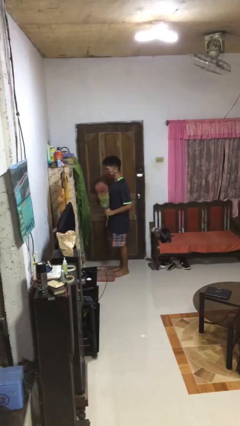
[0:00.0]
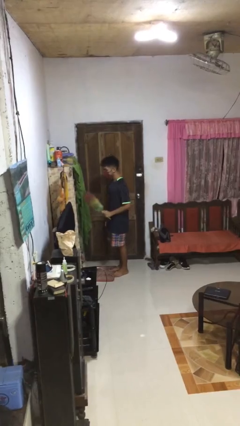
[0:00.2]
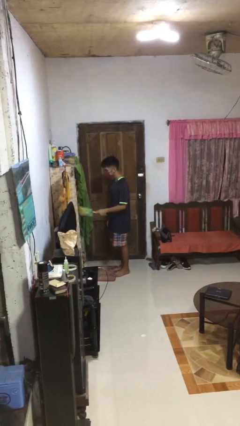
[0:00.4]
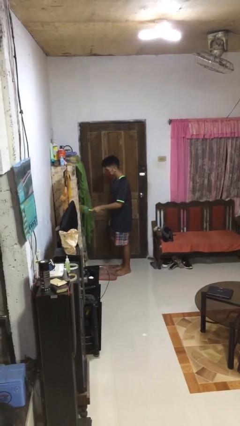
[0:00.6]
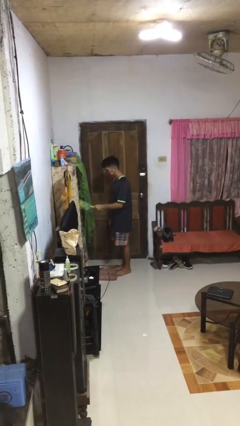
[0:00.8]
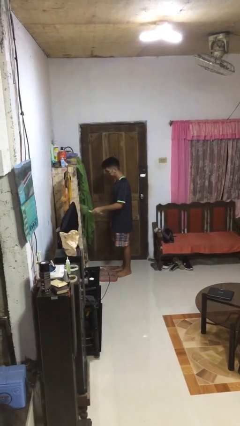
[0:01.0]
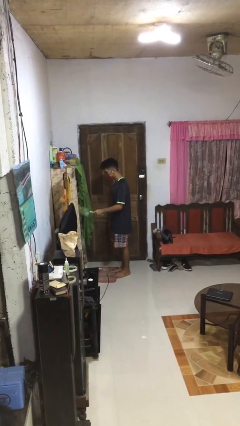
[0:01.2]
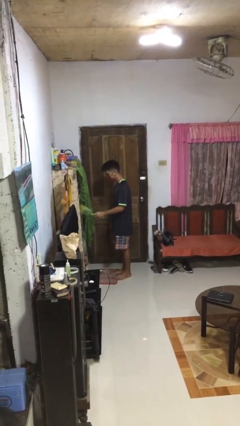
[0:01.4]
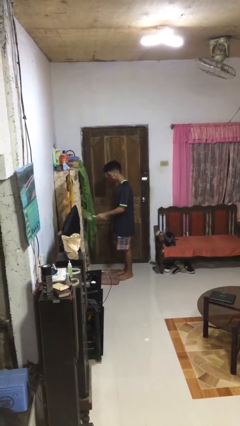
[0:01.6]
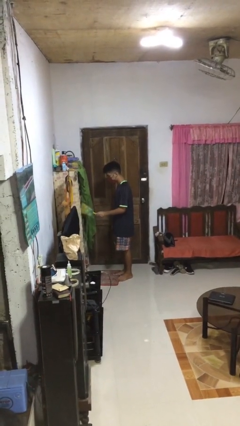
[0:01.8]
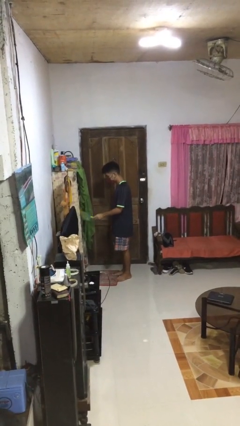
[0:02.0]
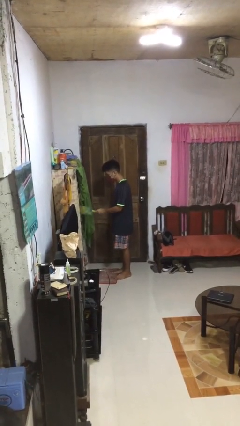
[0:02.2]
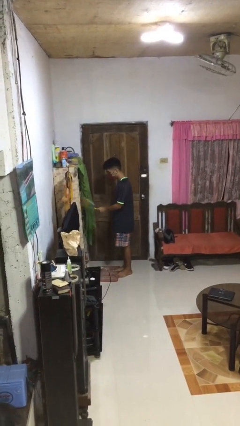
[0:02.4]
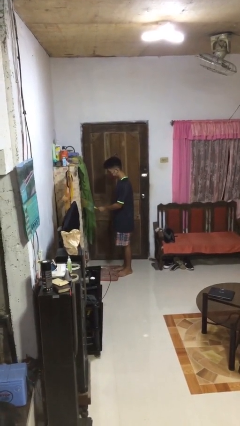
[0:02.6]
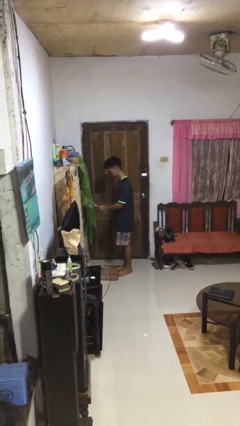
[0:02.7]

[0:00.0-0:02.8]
person dusts furniture

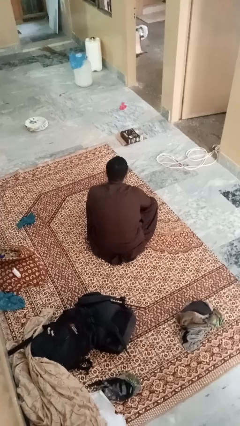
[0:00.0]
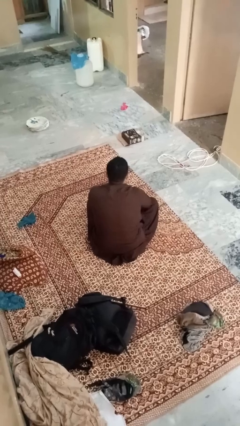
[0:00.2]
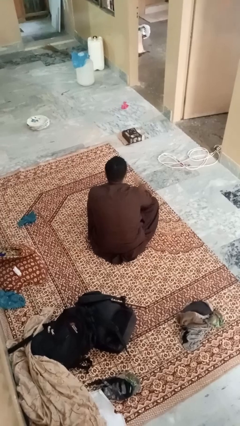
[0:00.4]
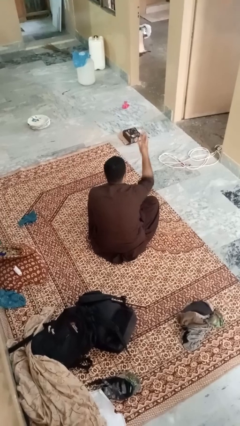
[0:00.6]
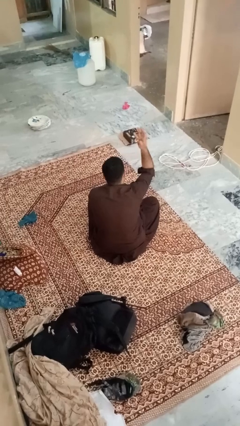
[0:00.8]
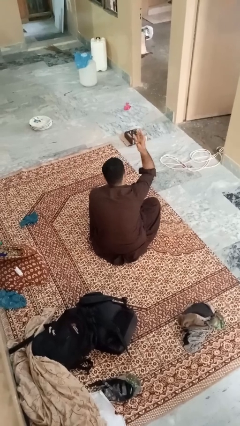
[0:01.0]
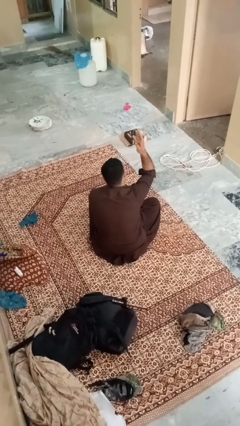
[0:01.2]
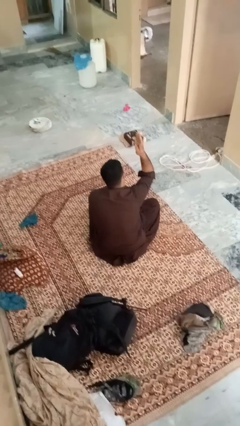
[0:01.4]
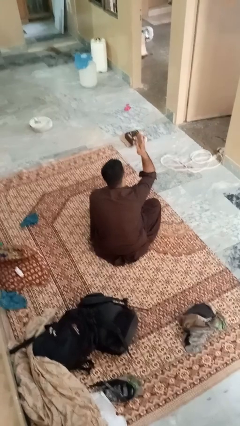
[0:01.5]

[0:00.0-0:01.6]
person gestures number four

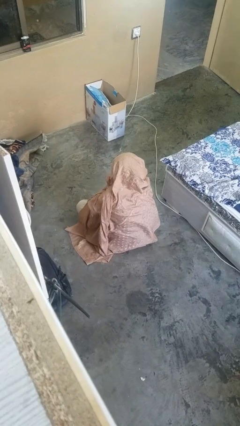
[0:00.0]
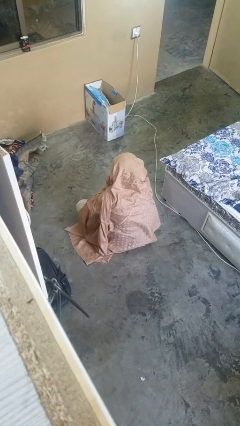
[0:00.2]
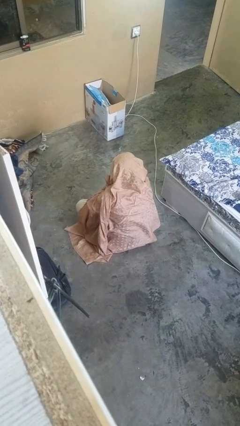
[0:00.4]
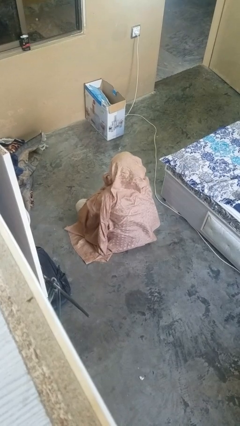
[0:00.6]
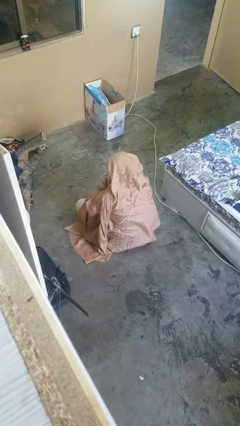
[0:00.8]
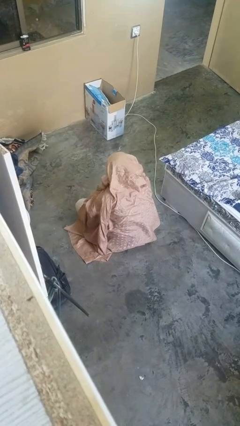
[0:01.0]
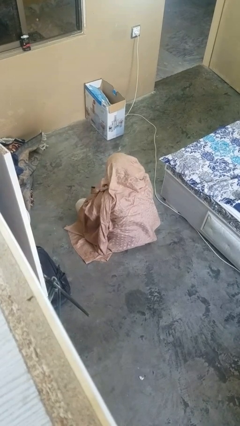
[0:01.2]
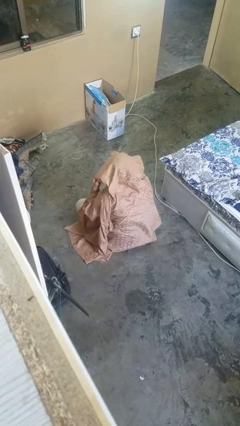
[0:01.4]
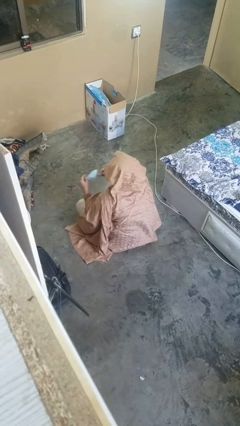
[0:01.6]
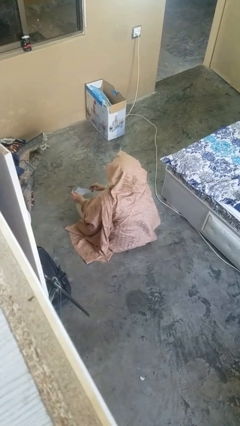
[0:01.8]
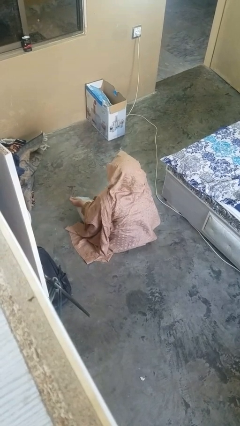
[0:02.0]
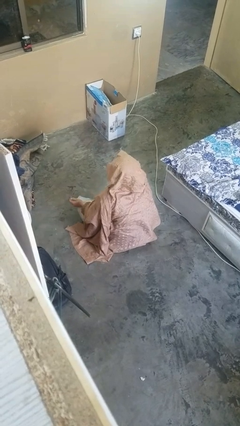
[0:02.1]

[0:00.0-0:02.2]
person takes off facemask

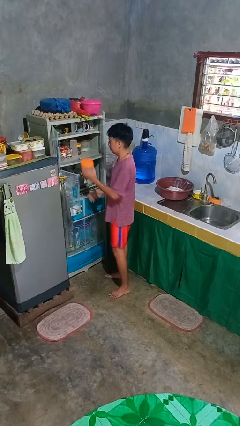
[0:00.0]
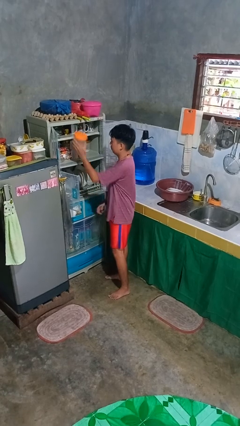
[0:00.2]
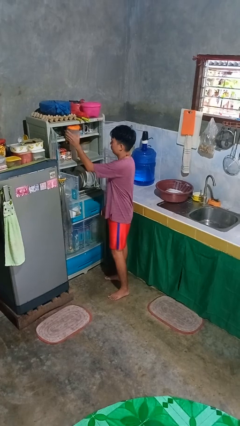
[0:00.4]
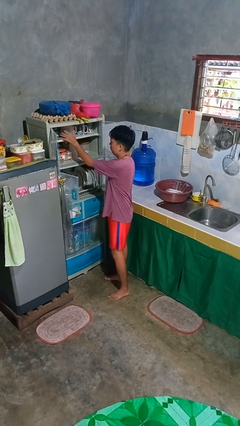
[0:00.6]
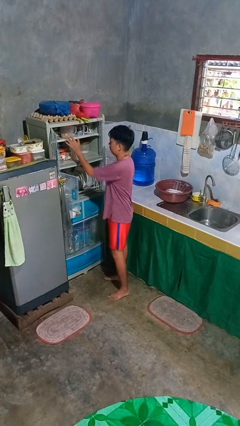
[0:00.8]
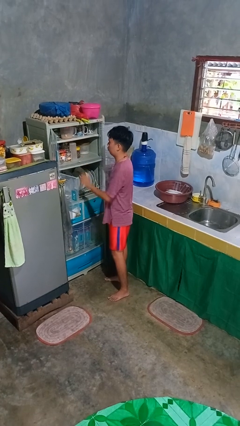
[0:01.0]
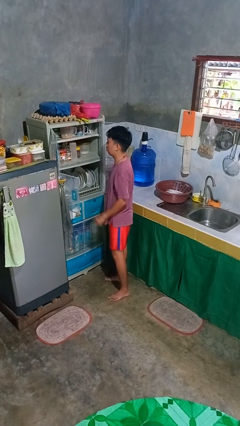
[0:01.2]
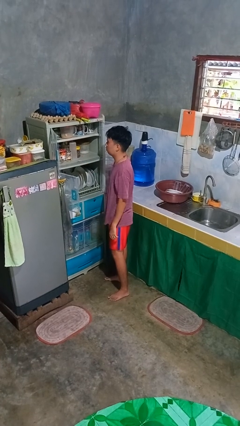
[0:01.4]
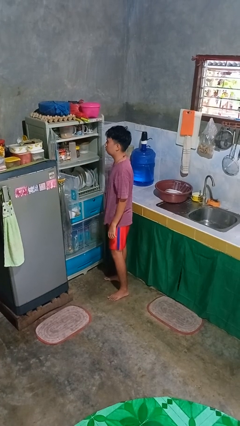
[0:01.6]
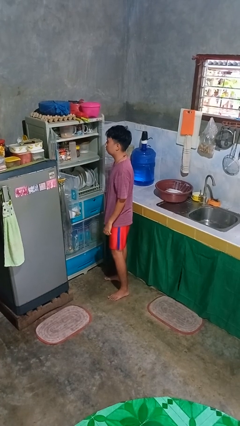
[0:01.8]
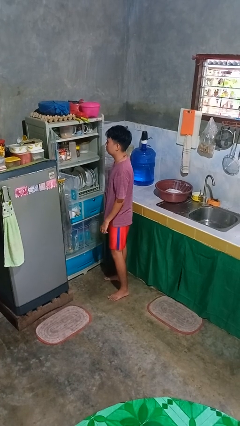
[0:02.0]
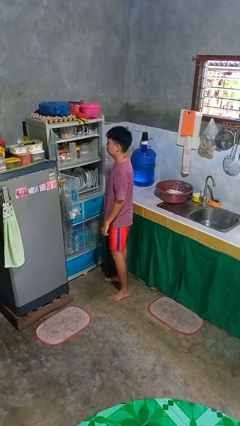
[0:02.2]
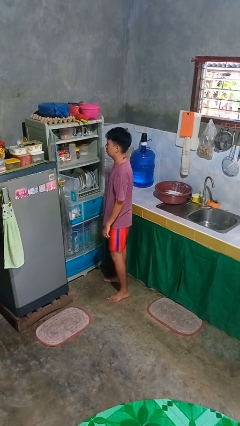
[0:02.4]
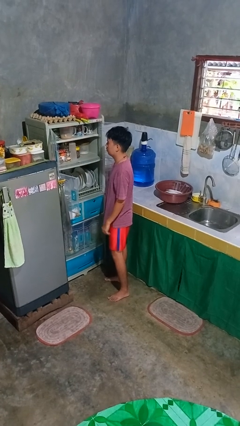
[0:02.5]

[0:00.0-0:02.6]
person puts object in cabinet

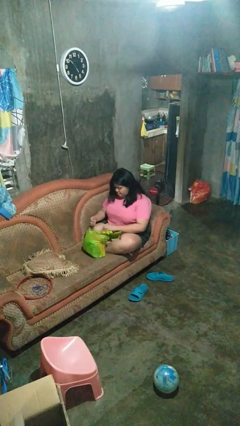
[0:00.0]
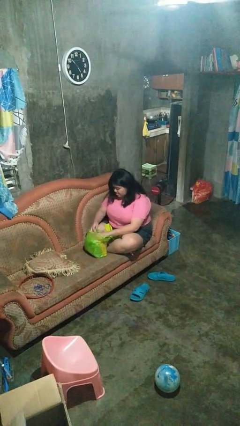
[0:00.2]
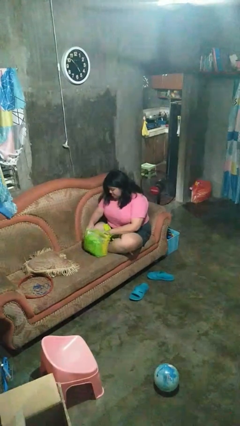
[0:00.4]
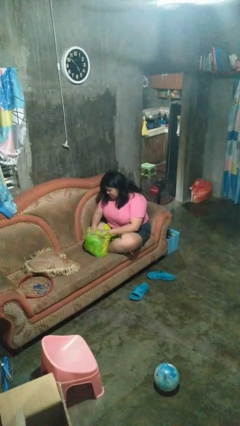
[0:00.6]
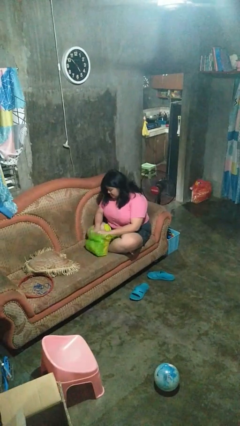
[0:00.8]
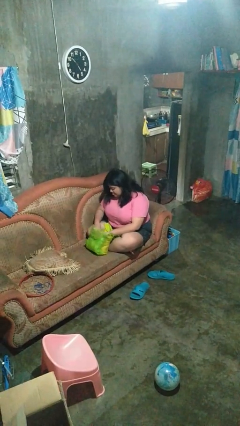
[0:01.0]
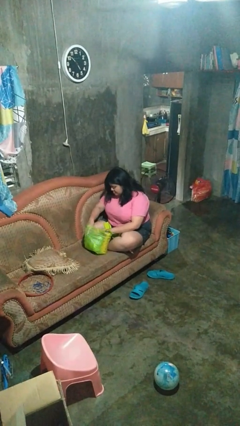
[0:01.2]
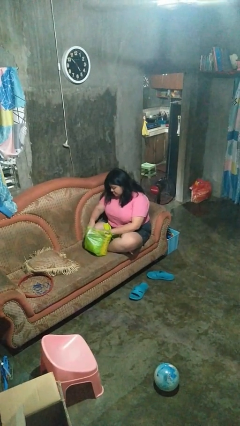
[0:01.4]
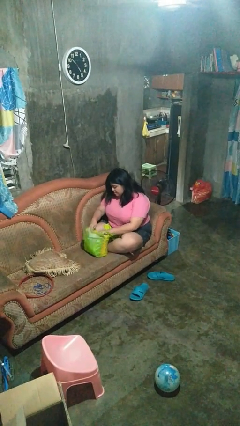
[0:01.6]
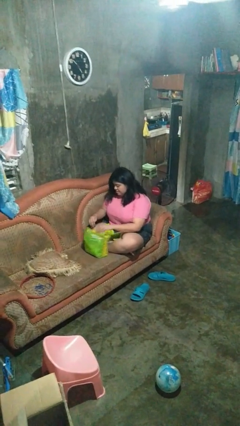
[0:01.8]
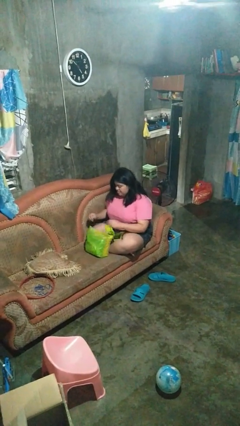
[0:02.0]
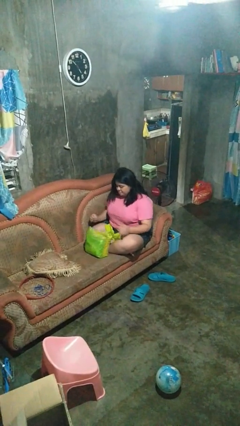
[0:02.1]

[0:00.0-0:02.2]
person searches in bag

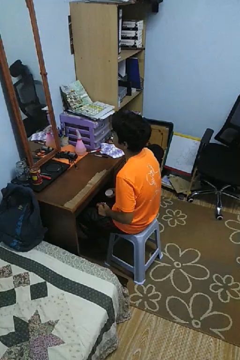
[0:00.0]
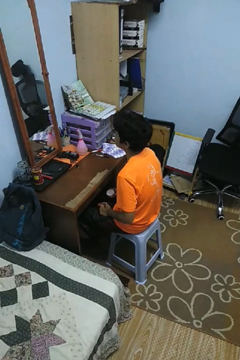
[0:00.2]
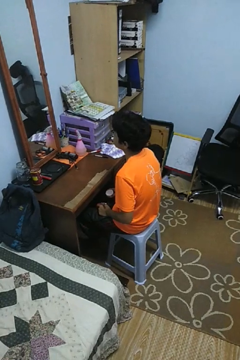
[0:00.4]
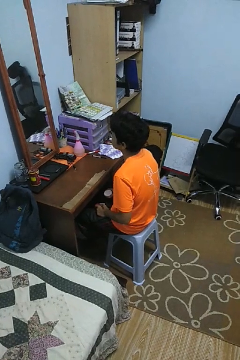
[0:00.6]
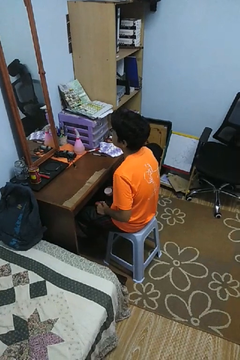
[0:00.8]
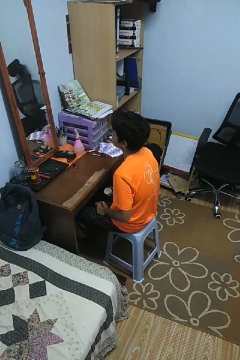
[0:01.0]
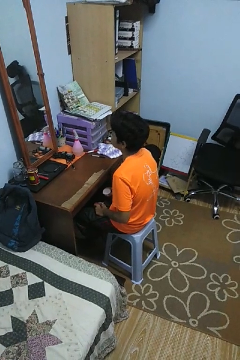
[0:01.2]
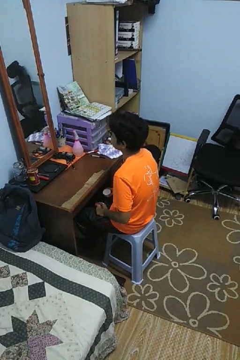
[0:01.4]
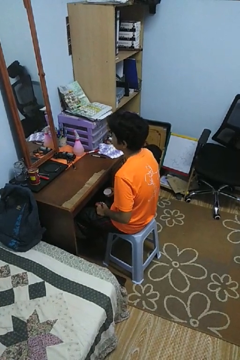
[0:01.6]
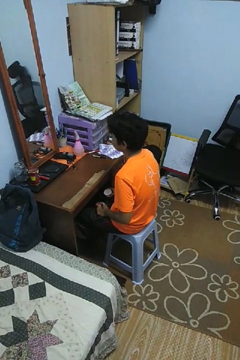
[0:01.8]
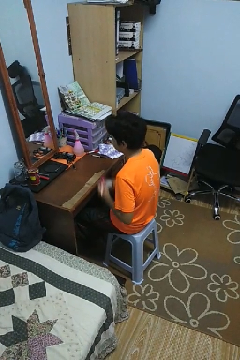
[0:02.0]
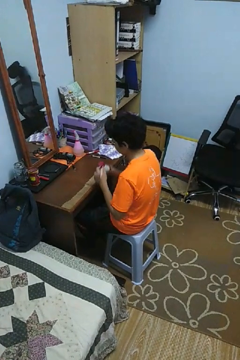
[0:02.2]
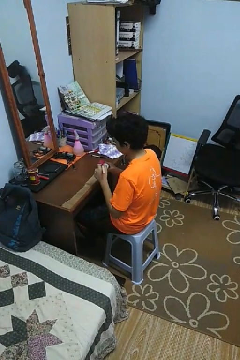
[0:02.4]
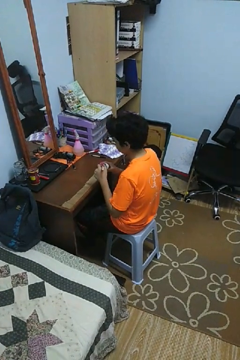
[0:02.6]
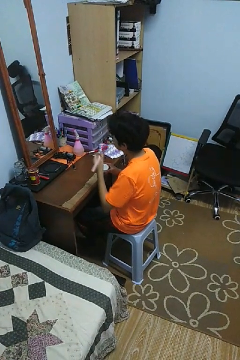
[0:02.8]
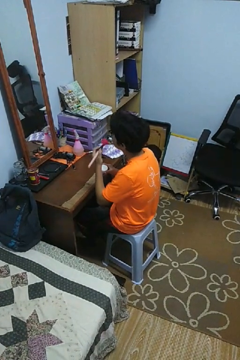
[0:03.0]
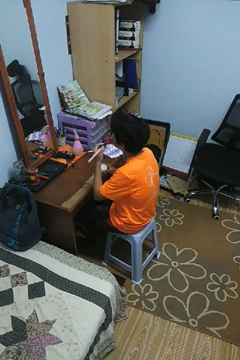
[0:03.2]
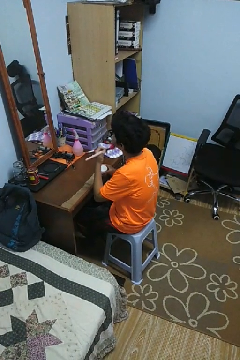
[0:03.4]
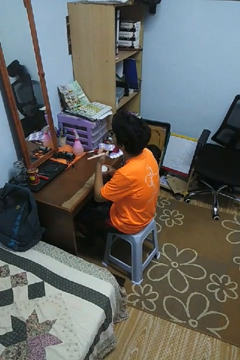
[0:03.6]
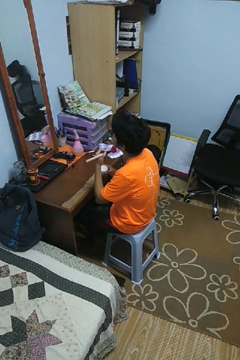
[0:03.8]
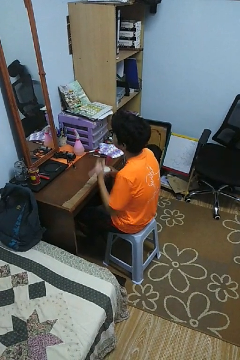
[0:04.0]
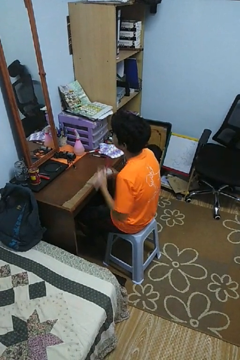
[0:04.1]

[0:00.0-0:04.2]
person applies foundation makeup

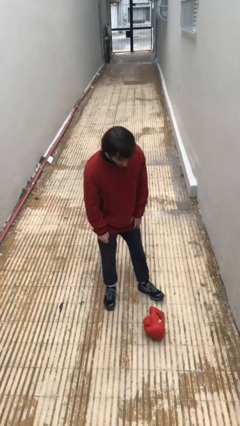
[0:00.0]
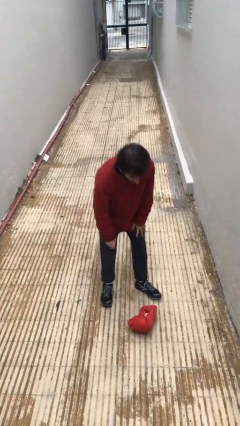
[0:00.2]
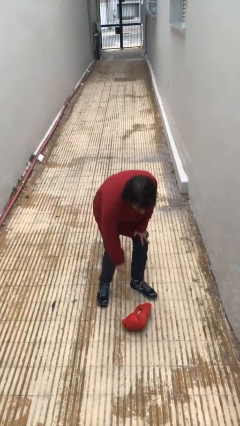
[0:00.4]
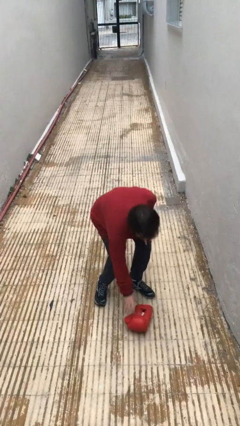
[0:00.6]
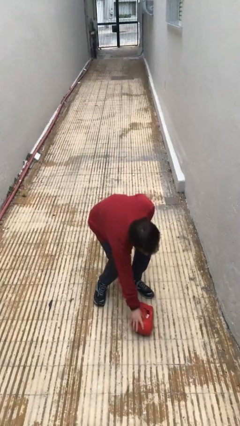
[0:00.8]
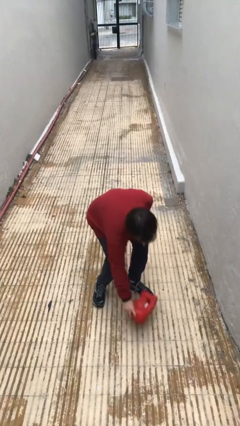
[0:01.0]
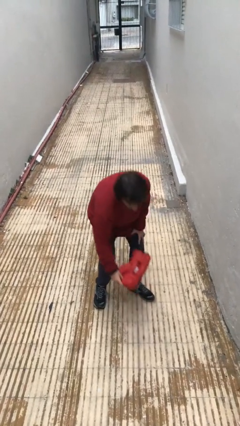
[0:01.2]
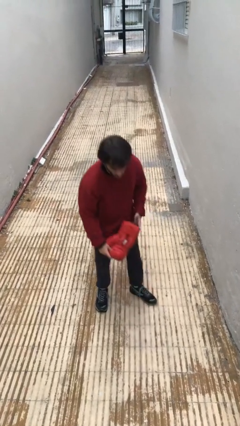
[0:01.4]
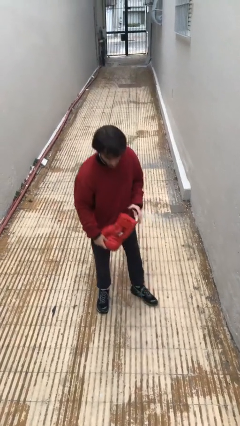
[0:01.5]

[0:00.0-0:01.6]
person picks up object from floor

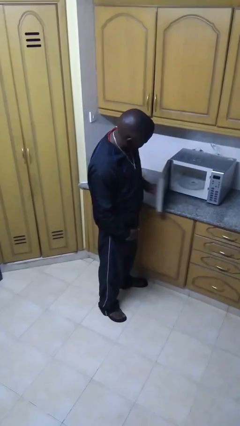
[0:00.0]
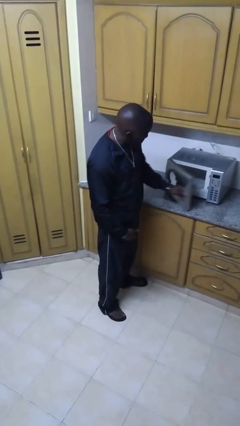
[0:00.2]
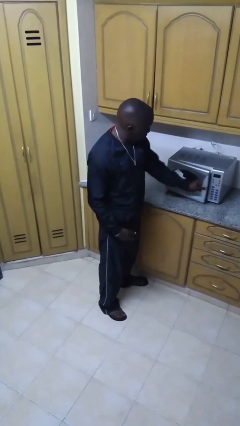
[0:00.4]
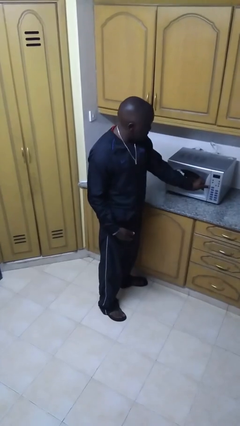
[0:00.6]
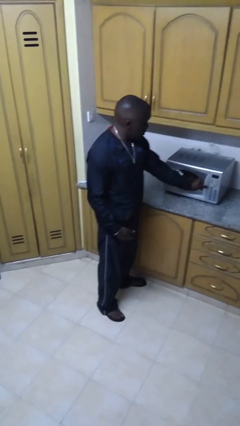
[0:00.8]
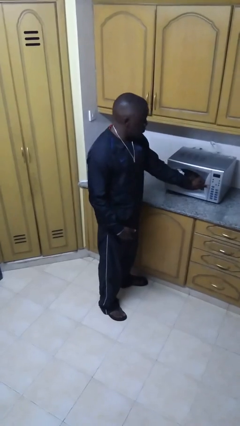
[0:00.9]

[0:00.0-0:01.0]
person closes microwave
